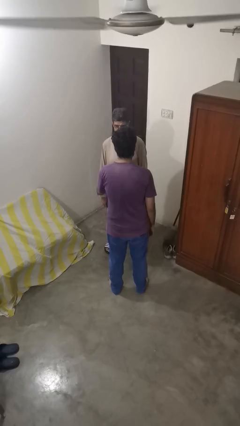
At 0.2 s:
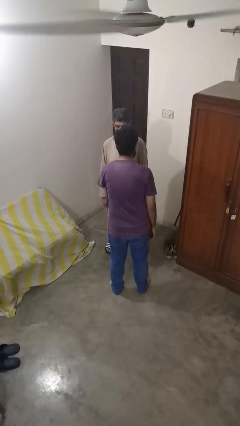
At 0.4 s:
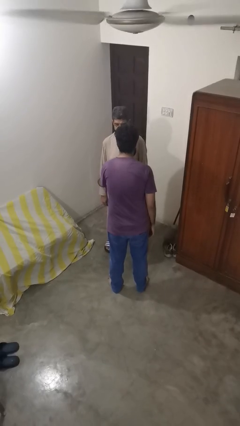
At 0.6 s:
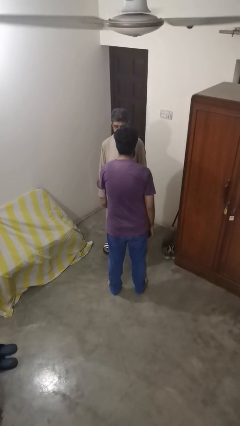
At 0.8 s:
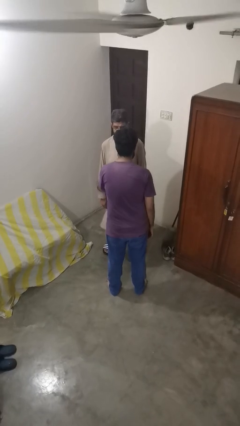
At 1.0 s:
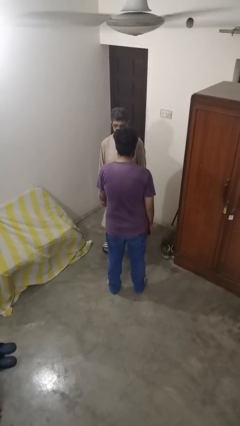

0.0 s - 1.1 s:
person grabs person by forearm

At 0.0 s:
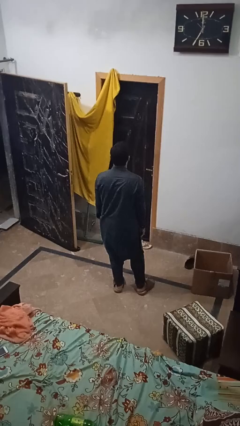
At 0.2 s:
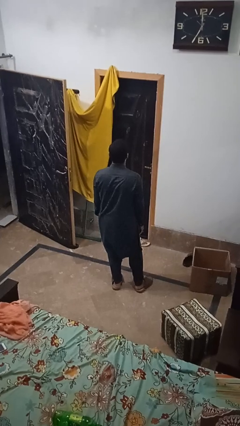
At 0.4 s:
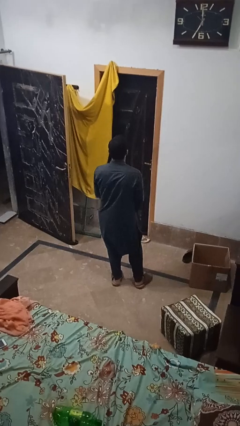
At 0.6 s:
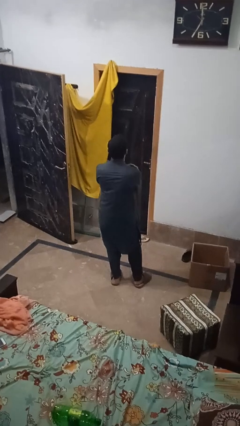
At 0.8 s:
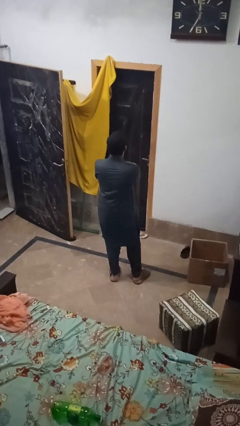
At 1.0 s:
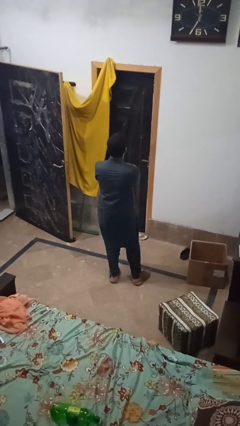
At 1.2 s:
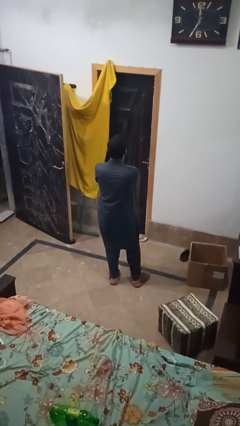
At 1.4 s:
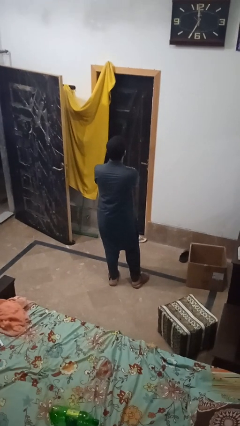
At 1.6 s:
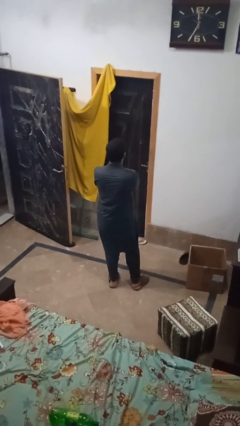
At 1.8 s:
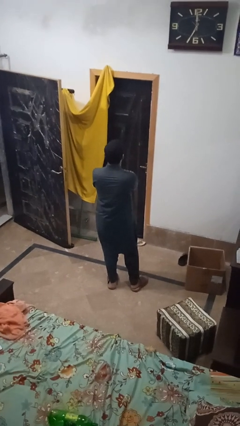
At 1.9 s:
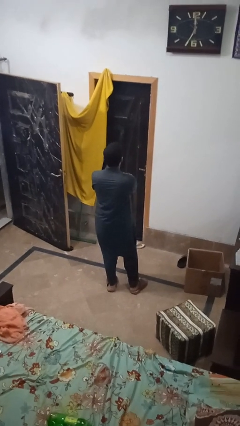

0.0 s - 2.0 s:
person gestures arms x

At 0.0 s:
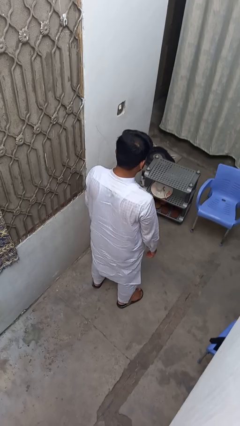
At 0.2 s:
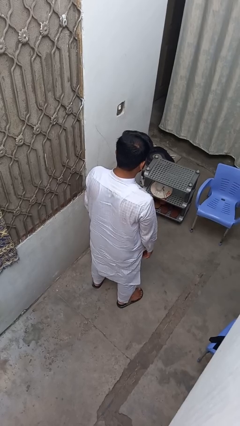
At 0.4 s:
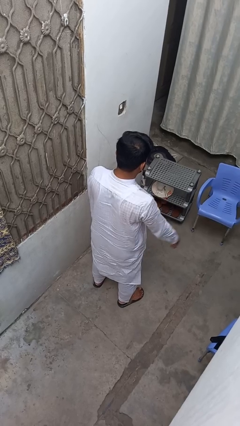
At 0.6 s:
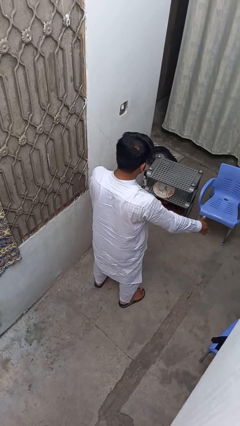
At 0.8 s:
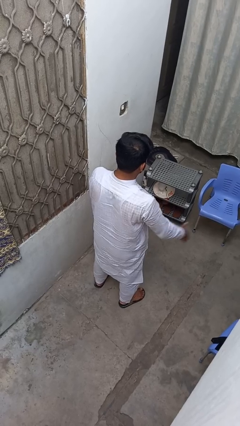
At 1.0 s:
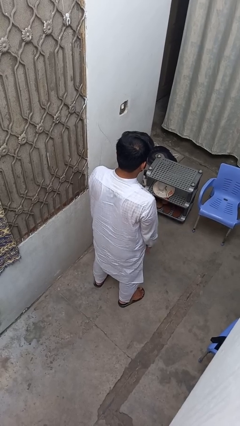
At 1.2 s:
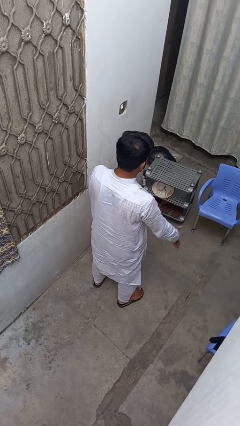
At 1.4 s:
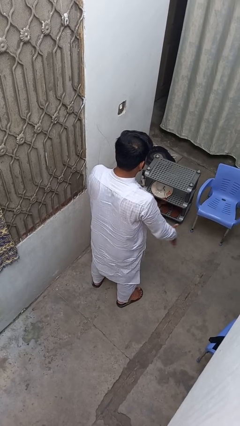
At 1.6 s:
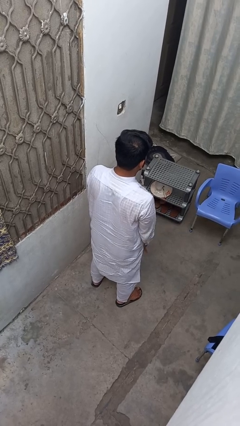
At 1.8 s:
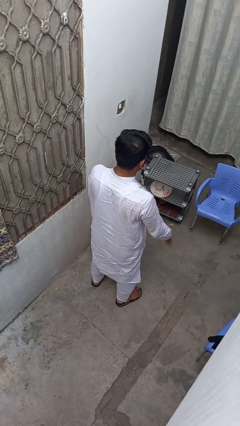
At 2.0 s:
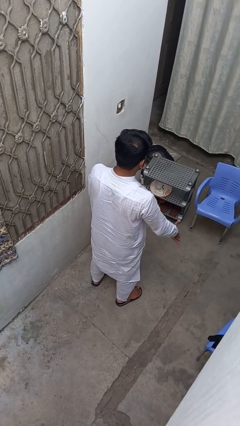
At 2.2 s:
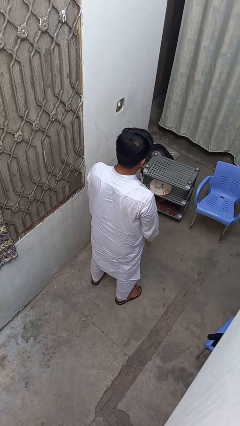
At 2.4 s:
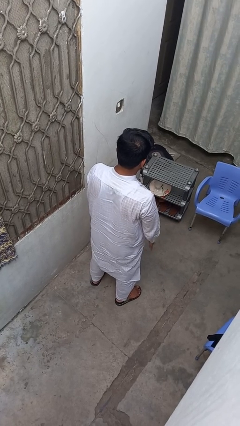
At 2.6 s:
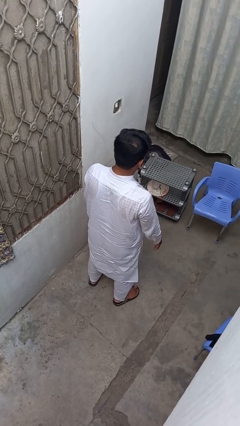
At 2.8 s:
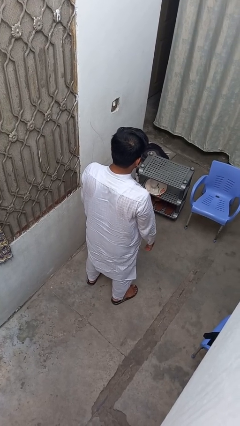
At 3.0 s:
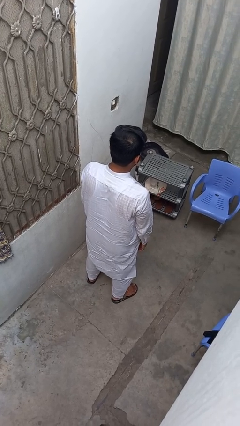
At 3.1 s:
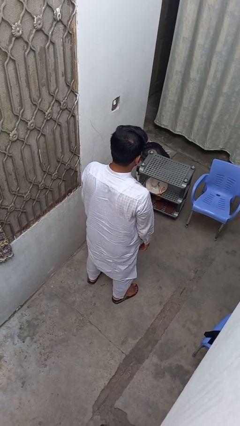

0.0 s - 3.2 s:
person slaps hands on thighs

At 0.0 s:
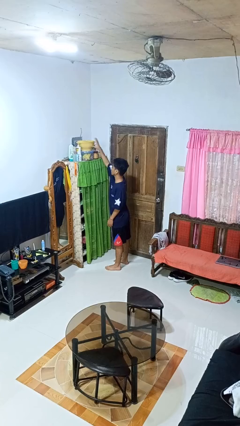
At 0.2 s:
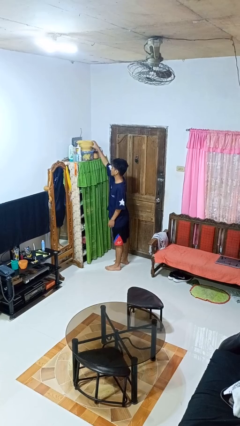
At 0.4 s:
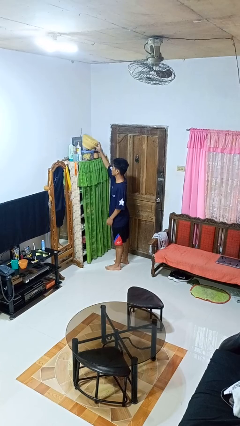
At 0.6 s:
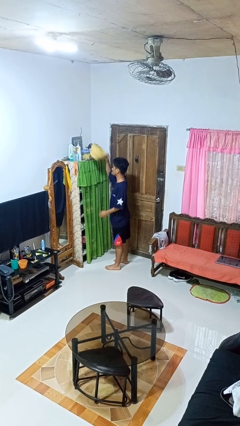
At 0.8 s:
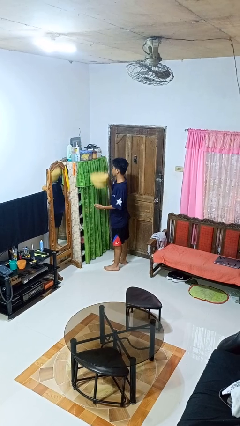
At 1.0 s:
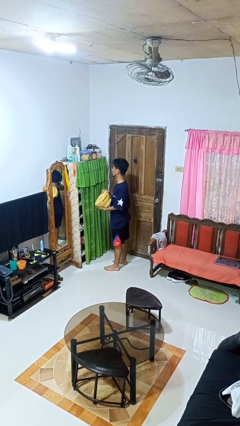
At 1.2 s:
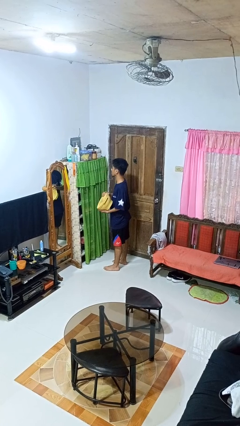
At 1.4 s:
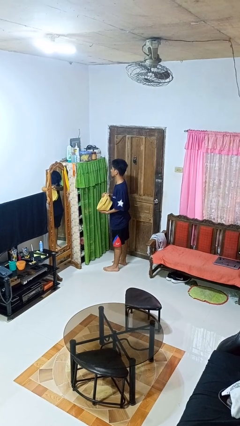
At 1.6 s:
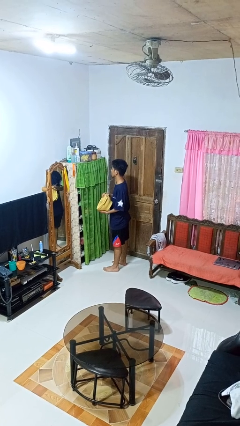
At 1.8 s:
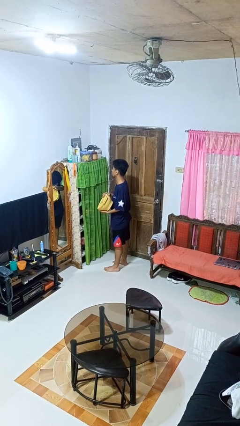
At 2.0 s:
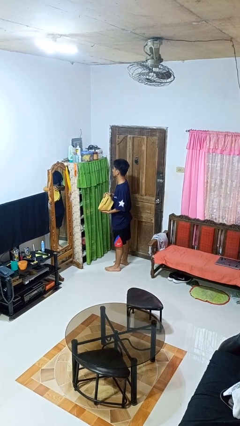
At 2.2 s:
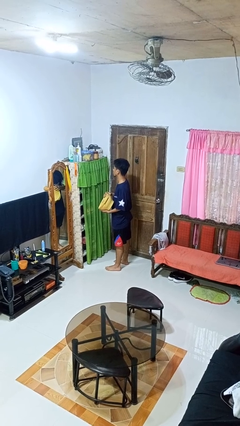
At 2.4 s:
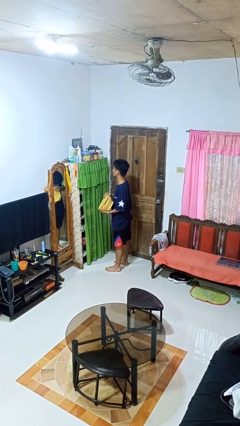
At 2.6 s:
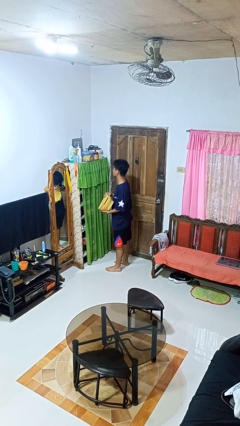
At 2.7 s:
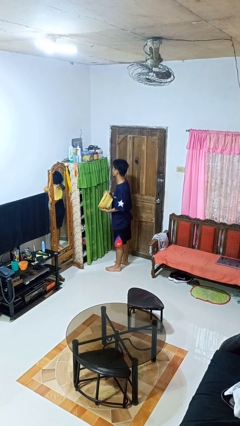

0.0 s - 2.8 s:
person picks up object from shelf

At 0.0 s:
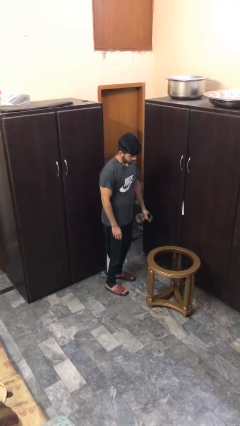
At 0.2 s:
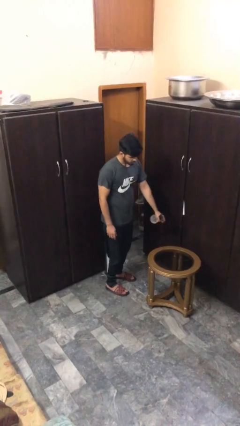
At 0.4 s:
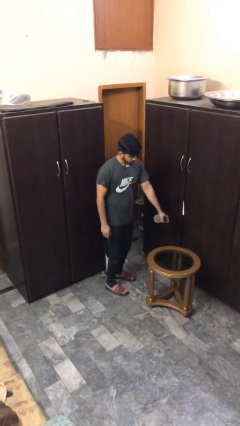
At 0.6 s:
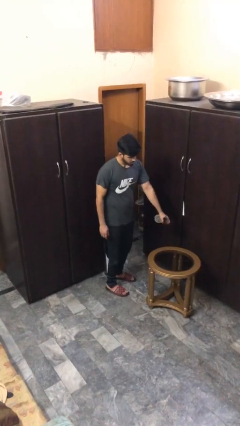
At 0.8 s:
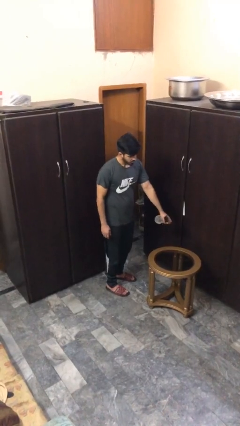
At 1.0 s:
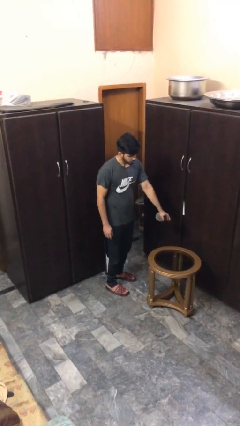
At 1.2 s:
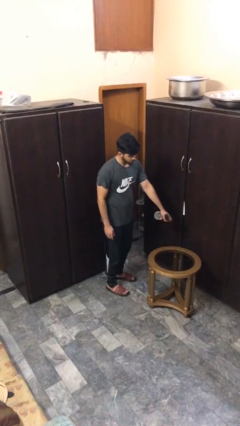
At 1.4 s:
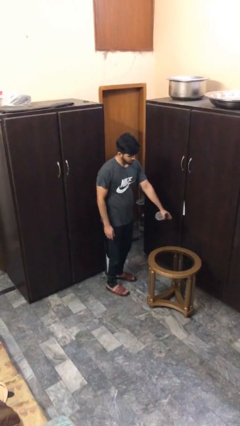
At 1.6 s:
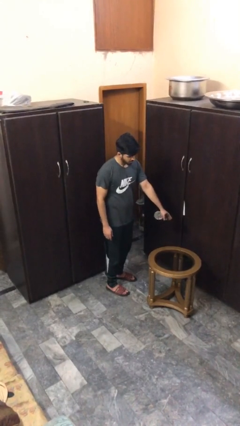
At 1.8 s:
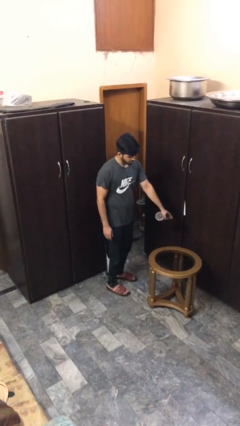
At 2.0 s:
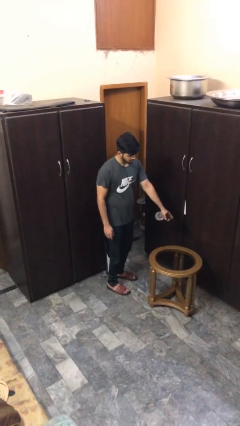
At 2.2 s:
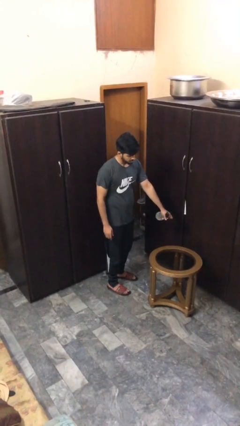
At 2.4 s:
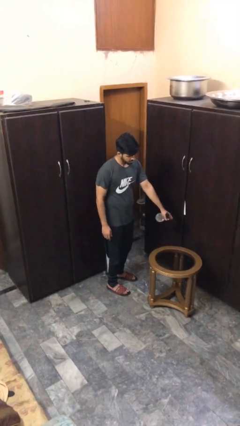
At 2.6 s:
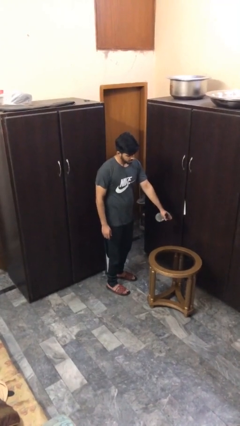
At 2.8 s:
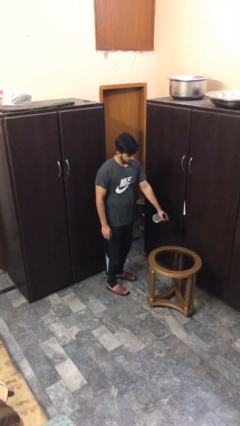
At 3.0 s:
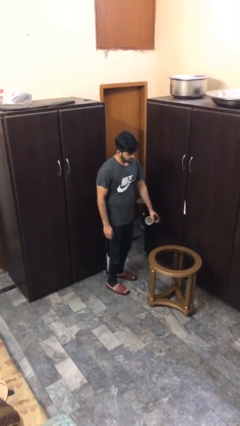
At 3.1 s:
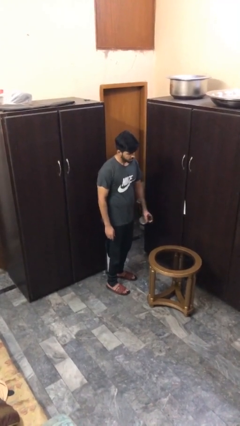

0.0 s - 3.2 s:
person sprays from bottle

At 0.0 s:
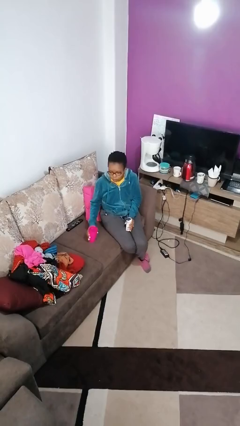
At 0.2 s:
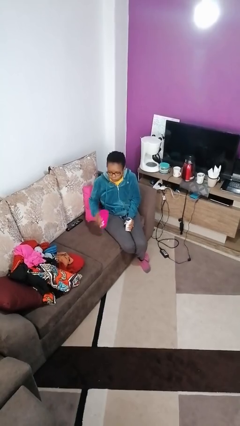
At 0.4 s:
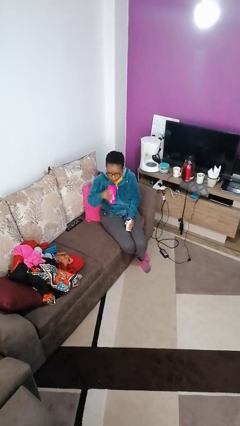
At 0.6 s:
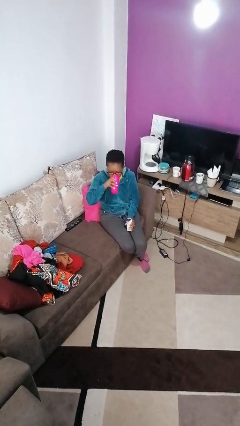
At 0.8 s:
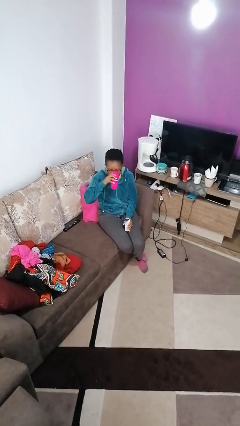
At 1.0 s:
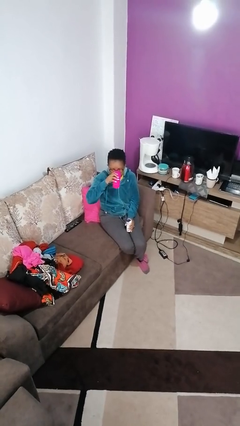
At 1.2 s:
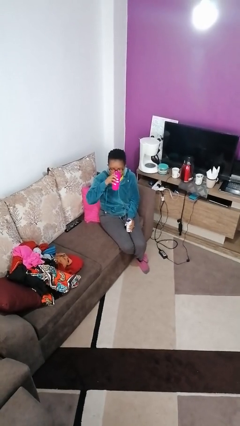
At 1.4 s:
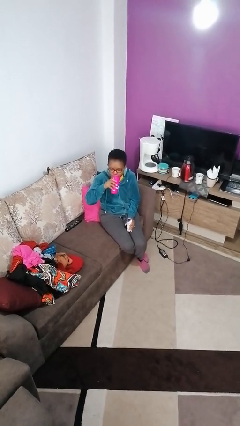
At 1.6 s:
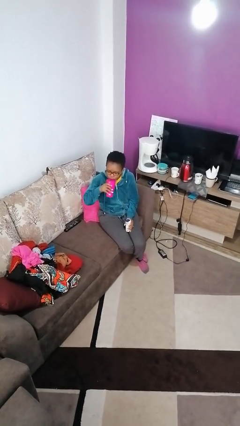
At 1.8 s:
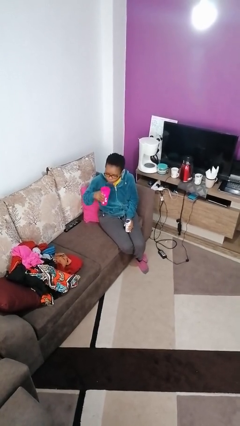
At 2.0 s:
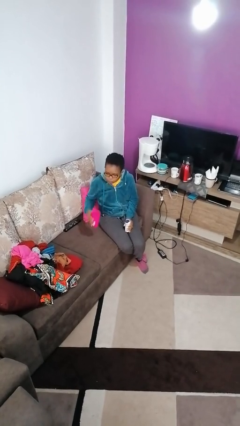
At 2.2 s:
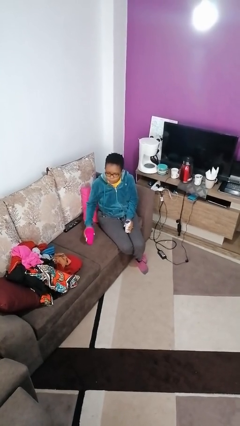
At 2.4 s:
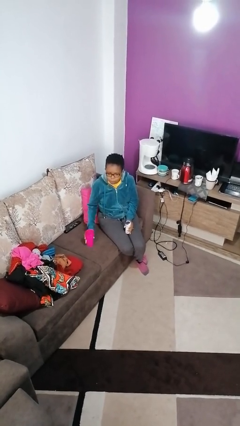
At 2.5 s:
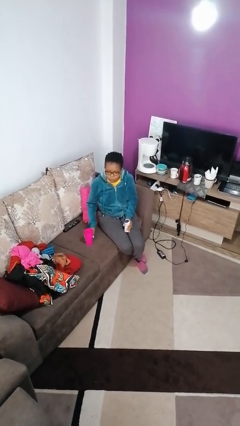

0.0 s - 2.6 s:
person drinks from cup

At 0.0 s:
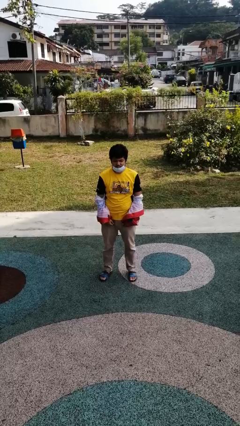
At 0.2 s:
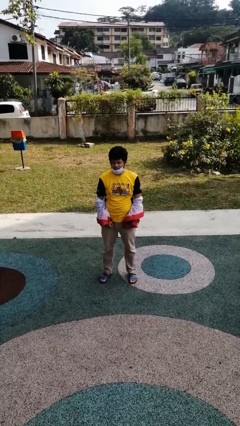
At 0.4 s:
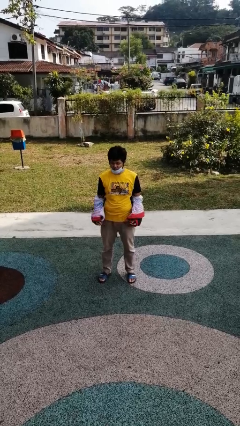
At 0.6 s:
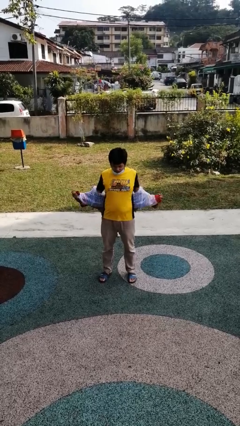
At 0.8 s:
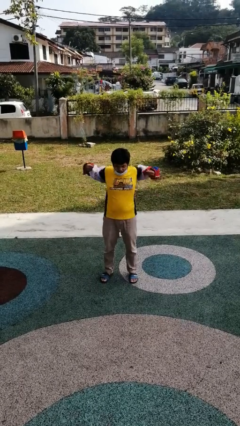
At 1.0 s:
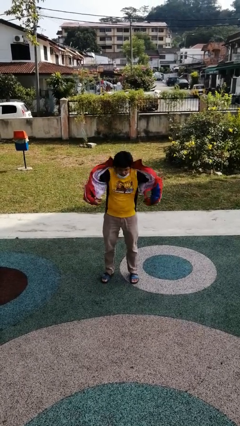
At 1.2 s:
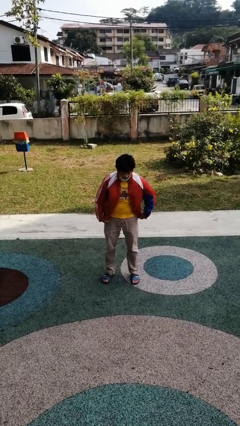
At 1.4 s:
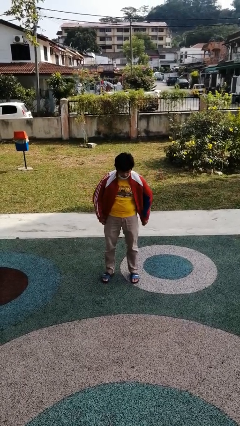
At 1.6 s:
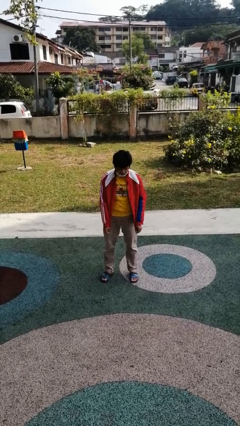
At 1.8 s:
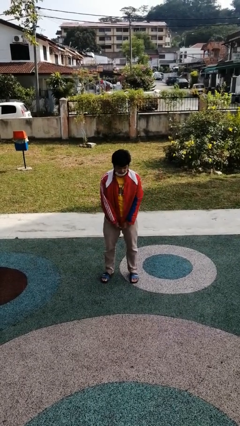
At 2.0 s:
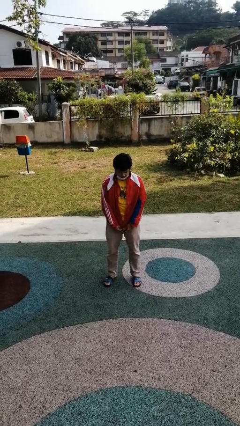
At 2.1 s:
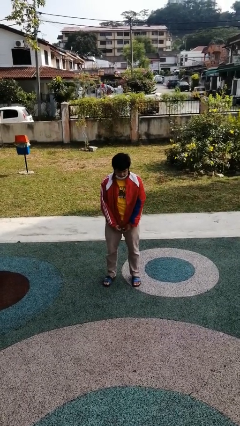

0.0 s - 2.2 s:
person puts on jacket
